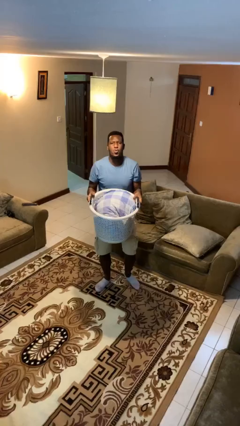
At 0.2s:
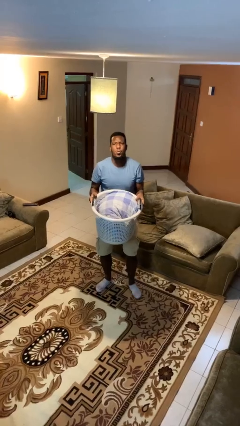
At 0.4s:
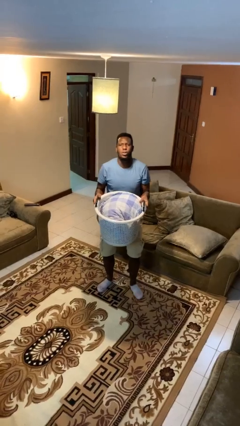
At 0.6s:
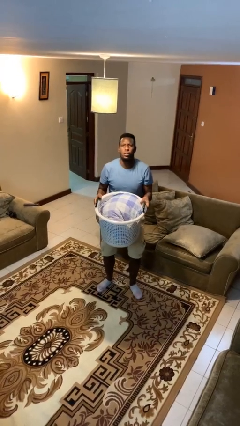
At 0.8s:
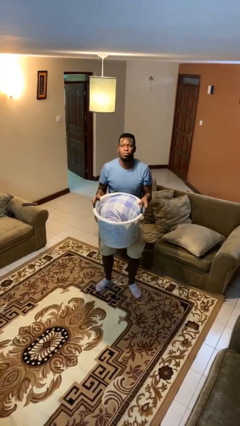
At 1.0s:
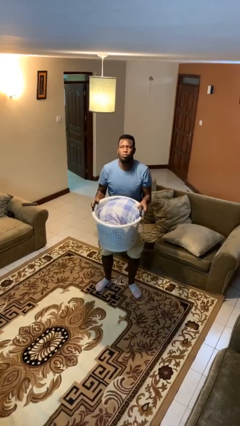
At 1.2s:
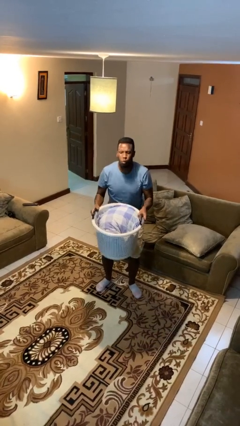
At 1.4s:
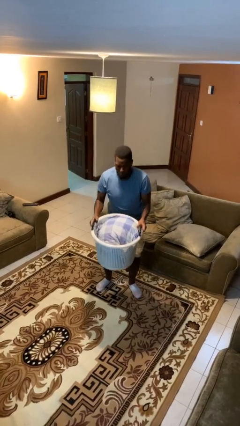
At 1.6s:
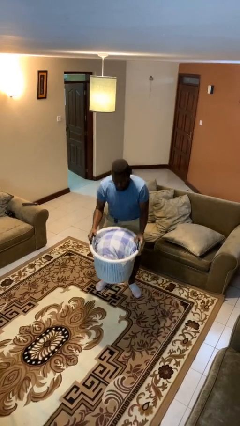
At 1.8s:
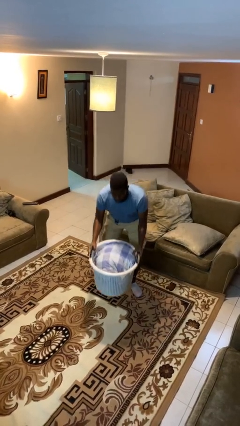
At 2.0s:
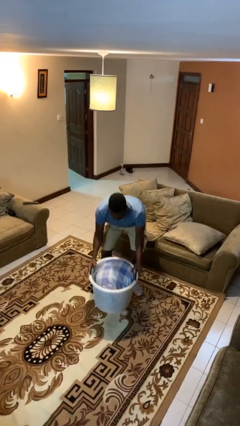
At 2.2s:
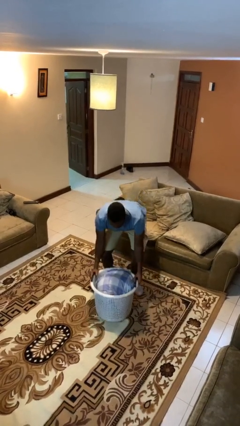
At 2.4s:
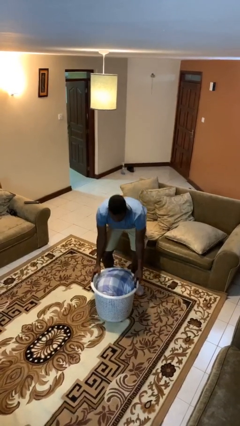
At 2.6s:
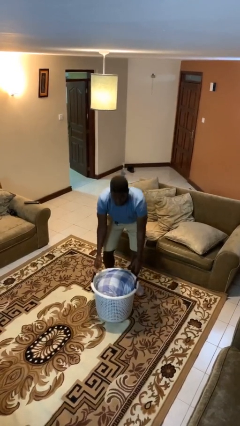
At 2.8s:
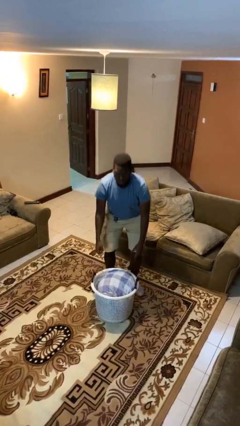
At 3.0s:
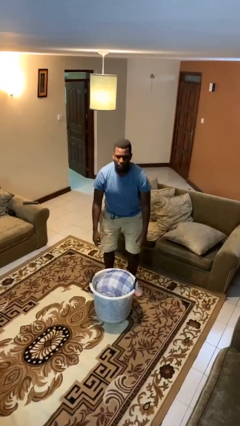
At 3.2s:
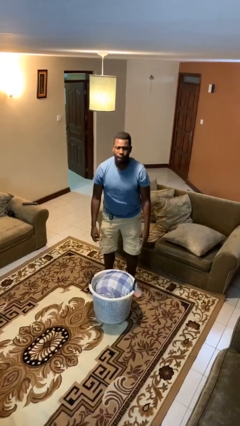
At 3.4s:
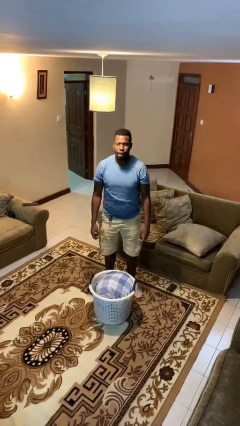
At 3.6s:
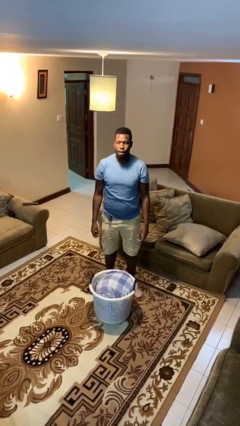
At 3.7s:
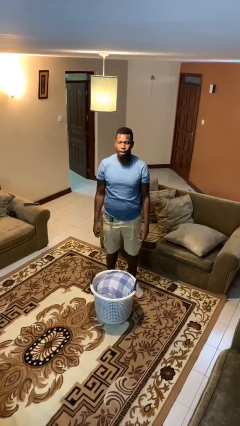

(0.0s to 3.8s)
person puts down object on floor

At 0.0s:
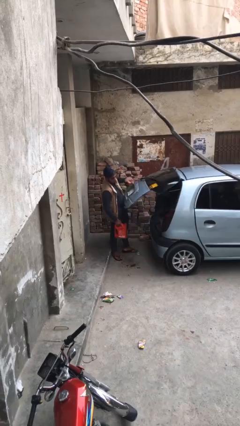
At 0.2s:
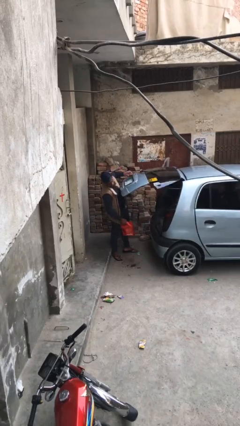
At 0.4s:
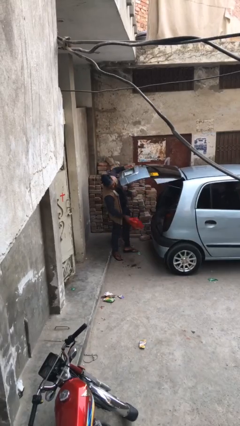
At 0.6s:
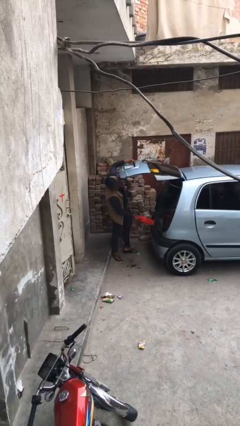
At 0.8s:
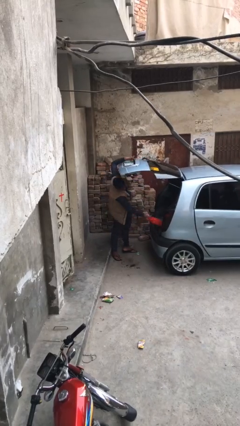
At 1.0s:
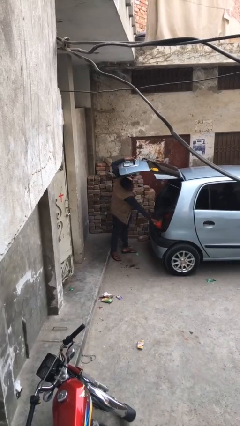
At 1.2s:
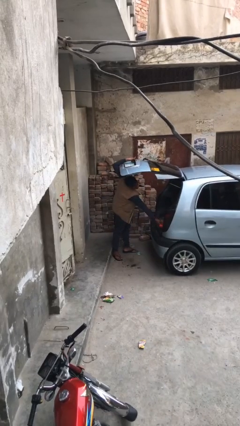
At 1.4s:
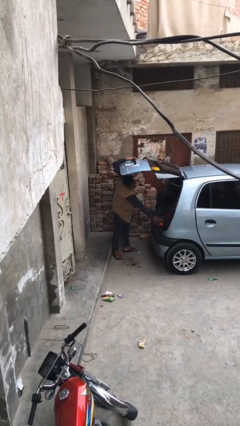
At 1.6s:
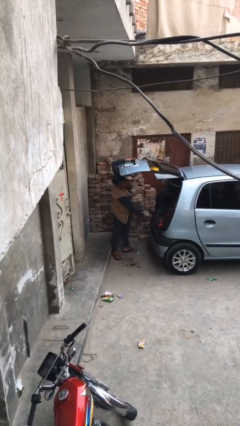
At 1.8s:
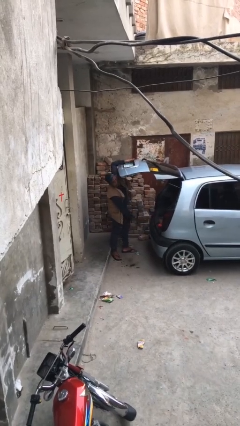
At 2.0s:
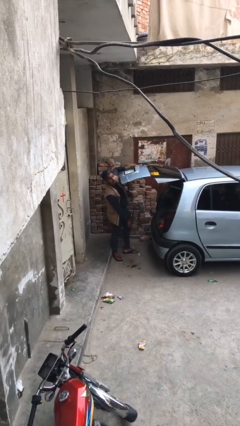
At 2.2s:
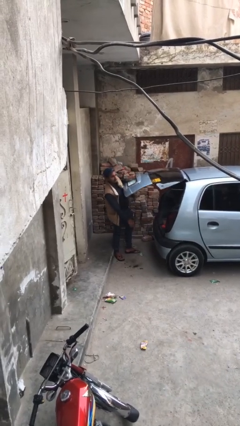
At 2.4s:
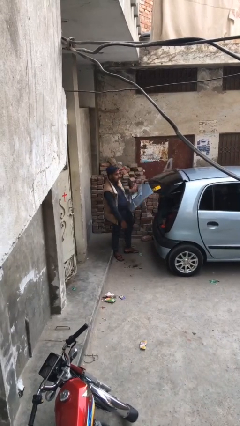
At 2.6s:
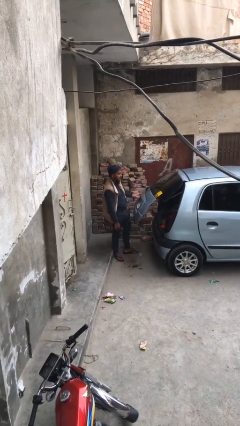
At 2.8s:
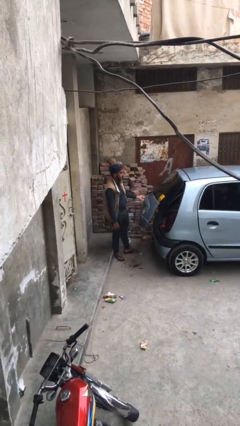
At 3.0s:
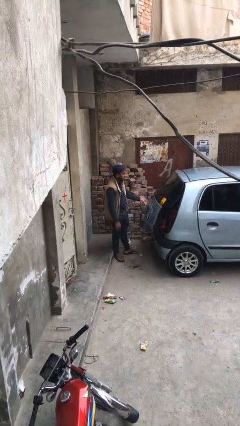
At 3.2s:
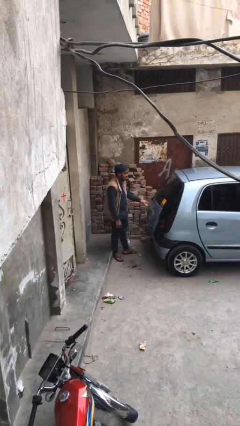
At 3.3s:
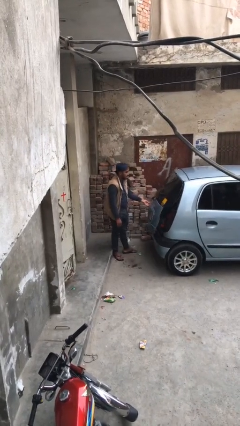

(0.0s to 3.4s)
person loads car

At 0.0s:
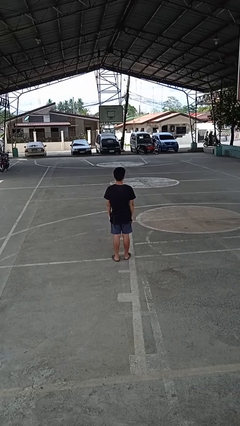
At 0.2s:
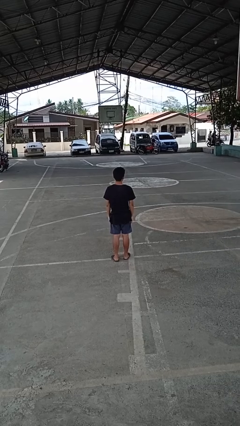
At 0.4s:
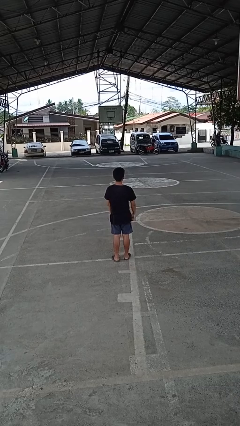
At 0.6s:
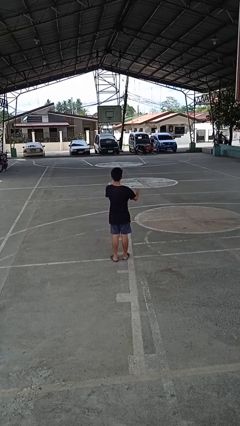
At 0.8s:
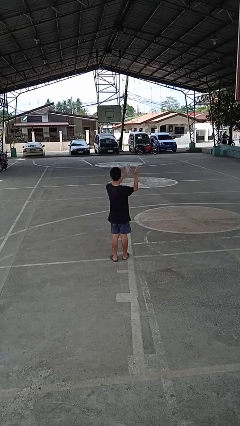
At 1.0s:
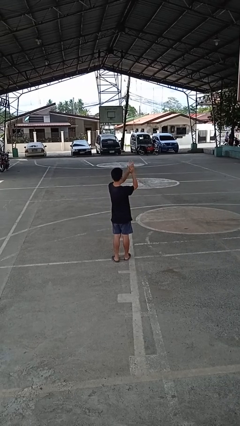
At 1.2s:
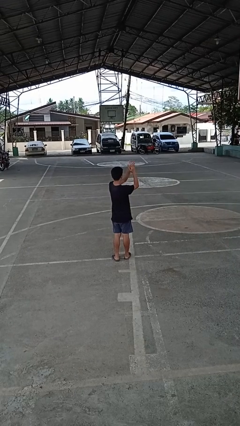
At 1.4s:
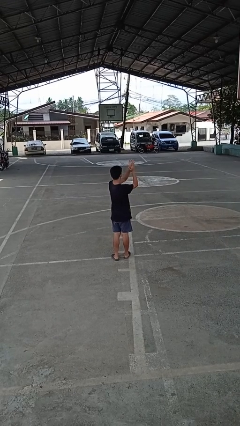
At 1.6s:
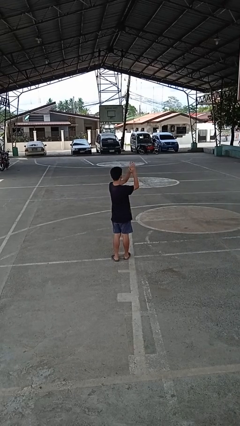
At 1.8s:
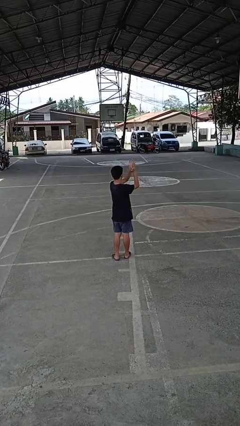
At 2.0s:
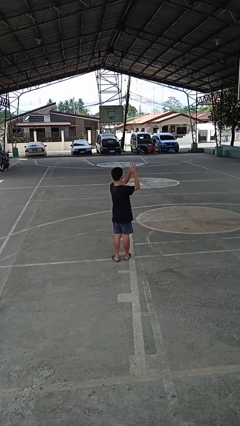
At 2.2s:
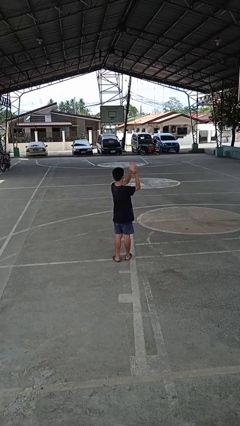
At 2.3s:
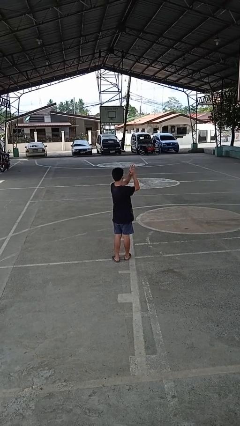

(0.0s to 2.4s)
person claps hands

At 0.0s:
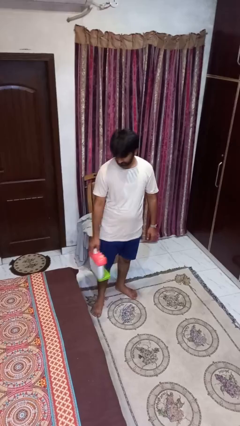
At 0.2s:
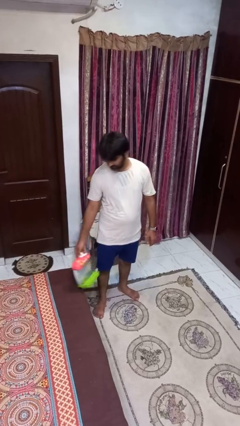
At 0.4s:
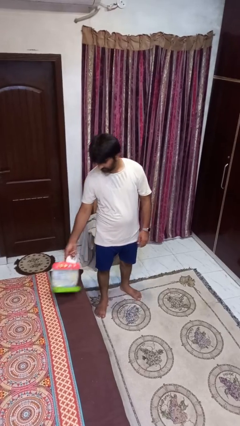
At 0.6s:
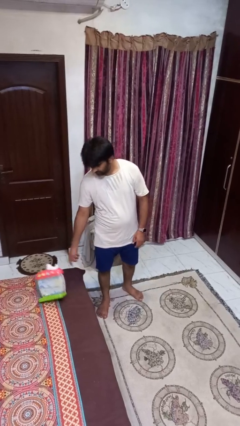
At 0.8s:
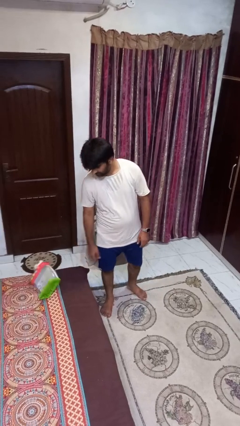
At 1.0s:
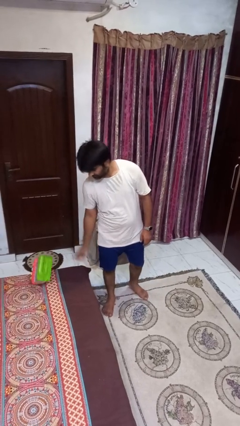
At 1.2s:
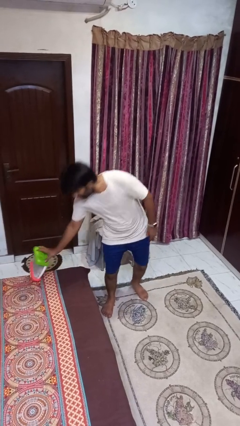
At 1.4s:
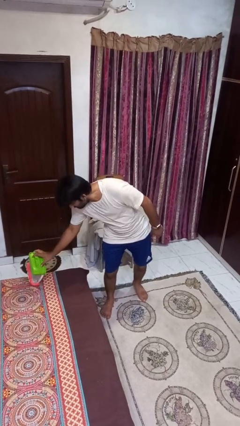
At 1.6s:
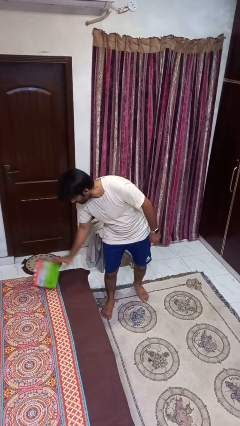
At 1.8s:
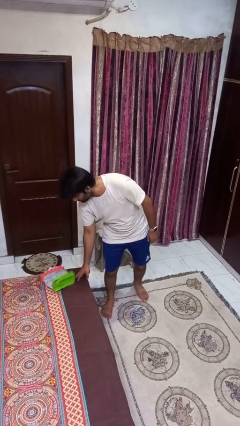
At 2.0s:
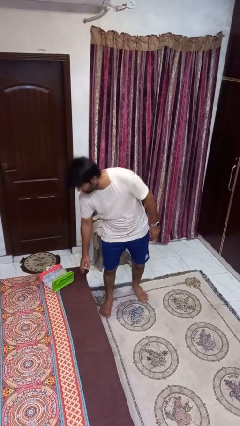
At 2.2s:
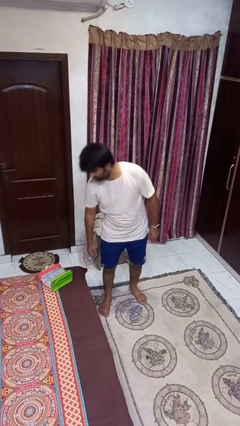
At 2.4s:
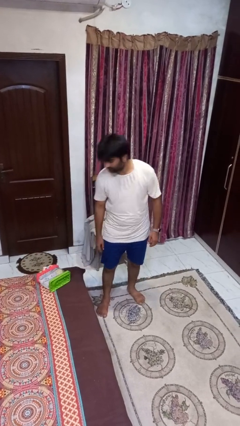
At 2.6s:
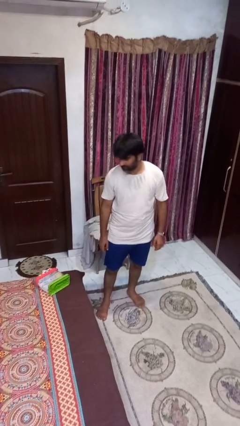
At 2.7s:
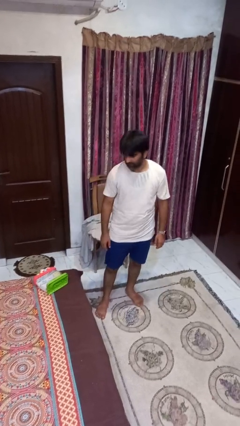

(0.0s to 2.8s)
person puts down object on bed

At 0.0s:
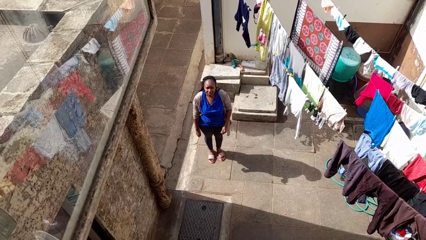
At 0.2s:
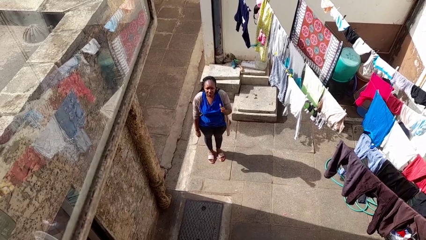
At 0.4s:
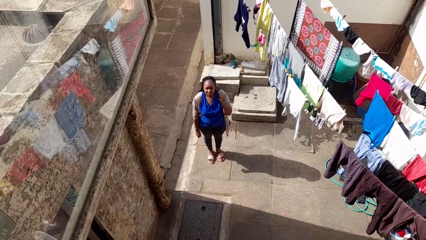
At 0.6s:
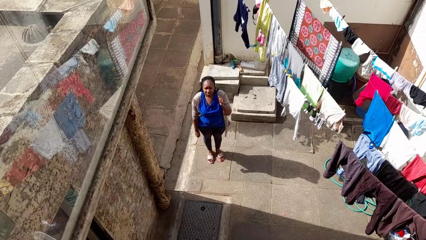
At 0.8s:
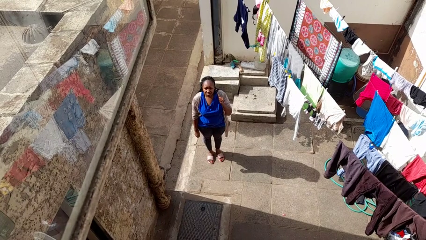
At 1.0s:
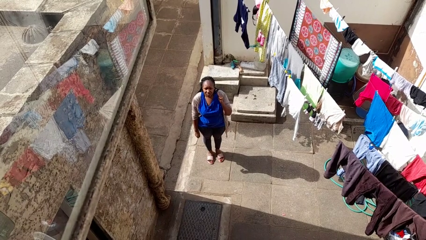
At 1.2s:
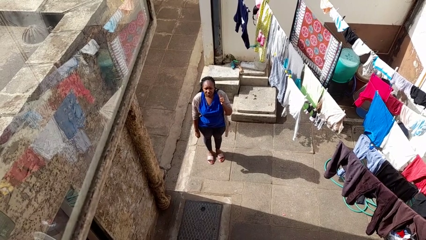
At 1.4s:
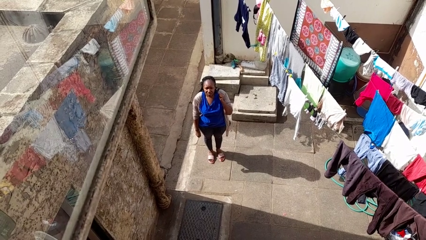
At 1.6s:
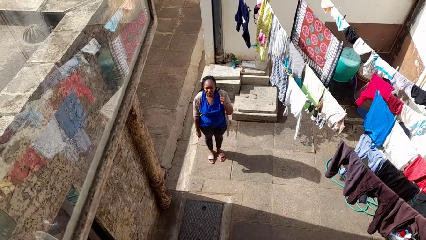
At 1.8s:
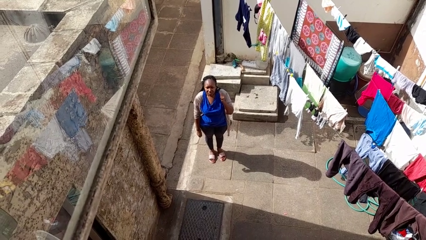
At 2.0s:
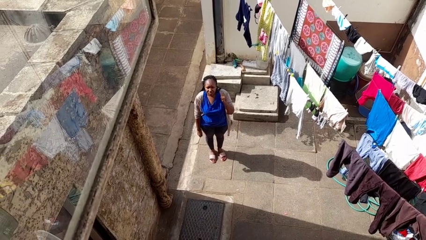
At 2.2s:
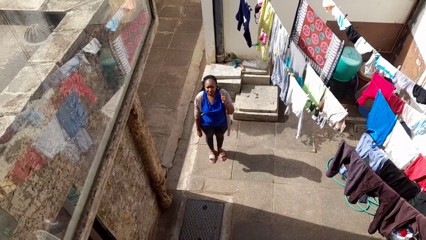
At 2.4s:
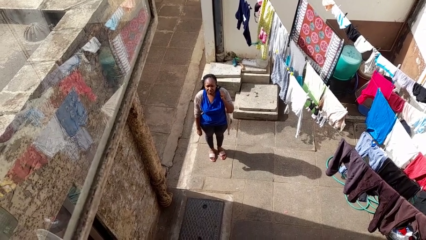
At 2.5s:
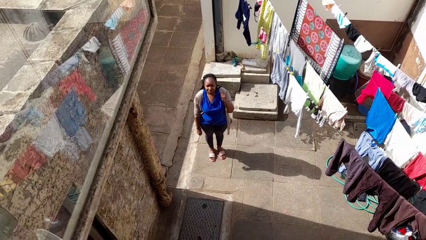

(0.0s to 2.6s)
person gestures behind me

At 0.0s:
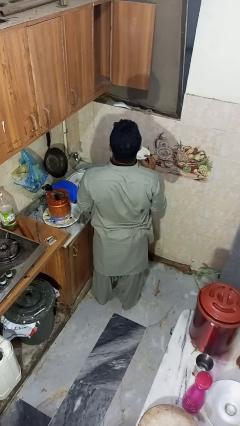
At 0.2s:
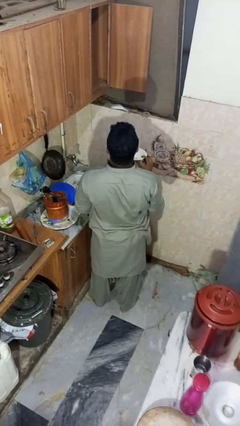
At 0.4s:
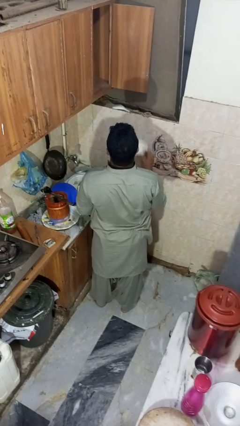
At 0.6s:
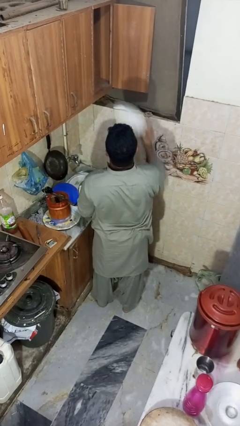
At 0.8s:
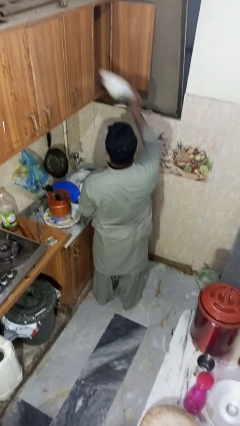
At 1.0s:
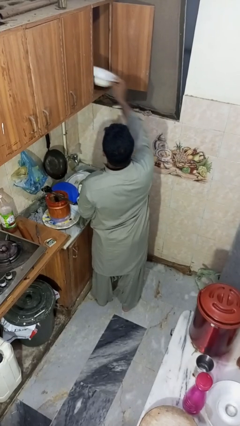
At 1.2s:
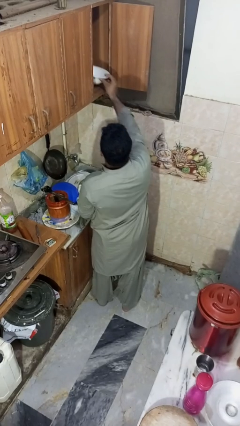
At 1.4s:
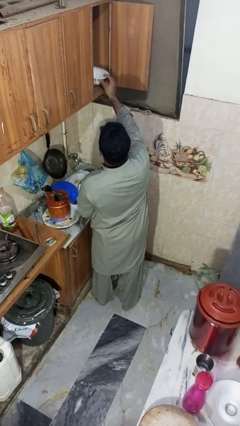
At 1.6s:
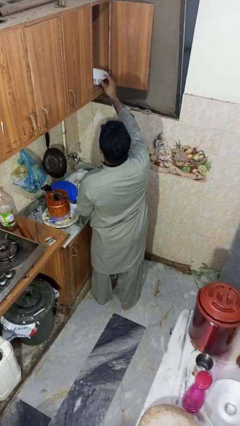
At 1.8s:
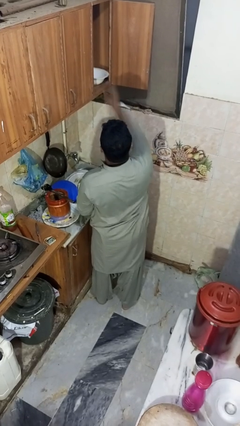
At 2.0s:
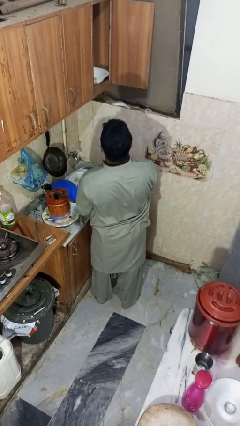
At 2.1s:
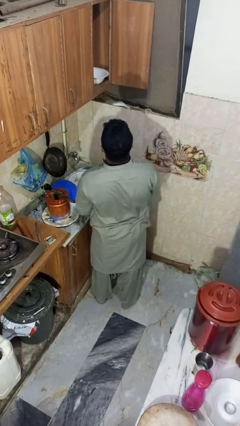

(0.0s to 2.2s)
person puts object in cabinet

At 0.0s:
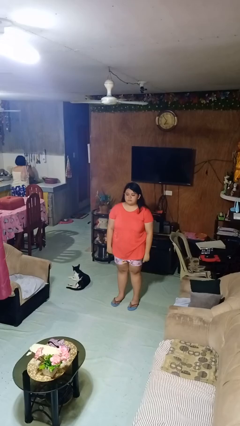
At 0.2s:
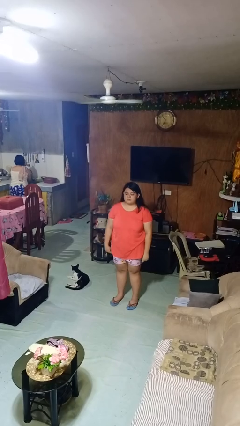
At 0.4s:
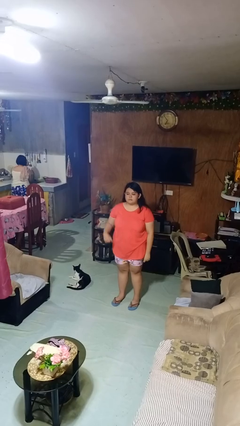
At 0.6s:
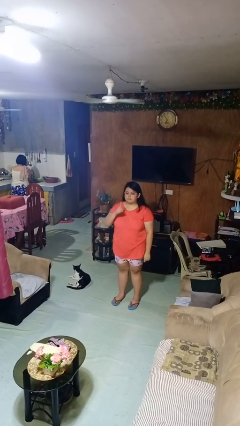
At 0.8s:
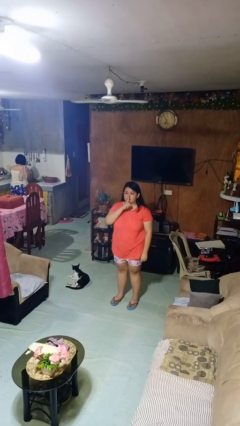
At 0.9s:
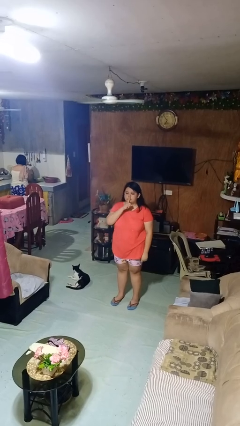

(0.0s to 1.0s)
person gestures be quiet
